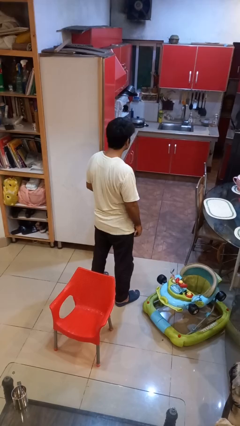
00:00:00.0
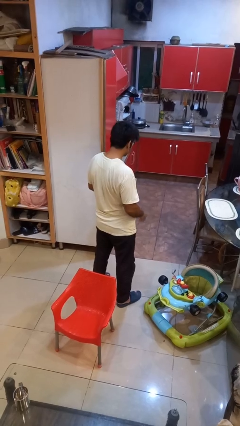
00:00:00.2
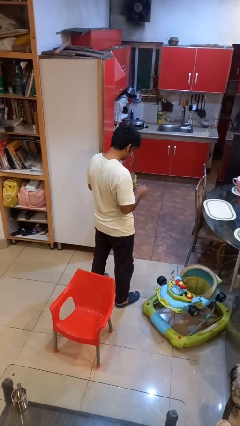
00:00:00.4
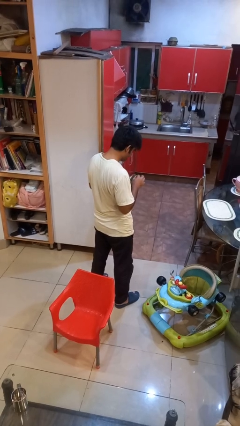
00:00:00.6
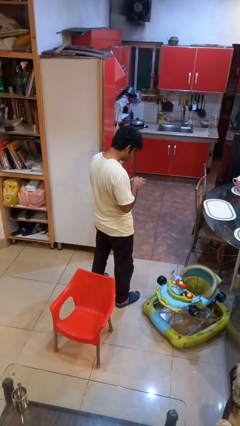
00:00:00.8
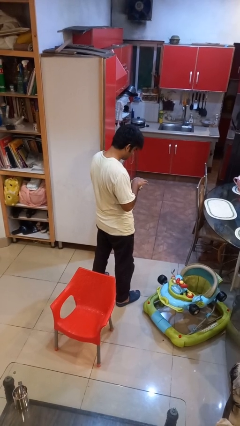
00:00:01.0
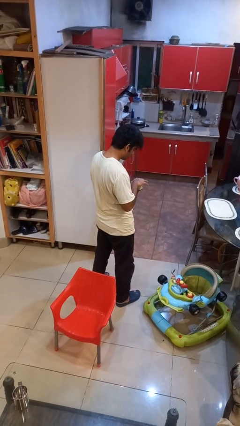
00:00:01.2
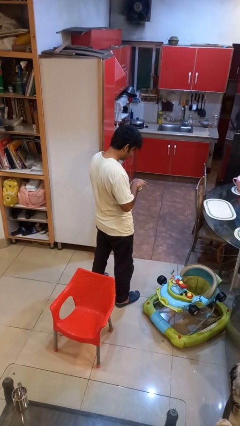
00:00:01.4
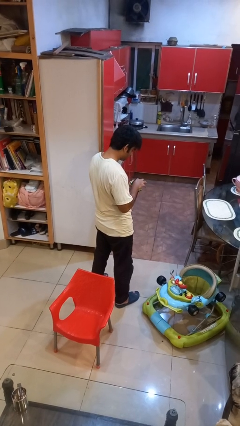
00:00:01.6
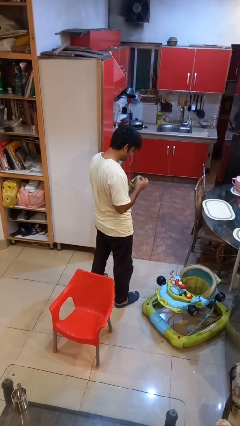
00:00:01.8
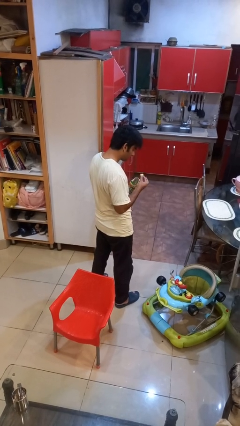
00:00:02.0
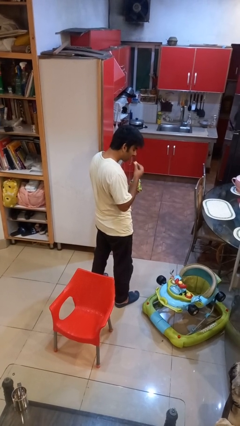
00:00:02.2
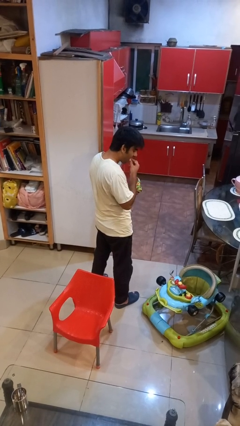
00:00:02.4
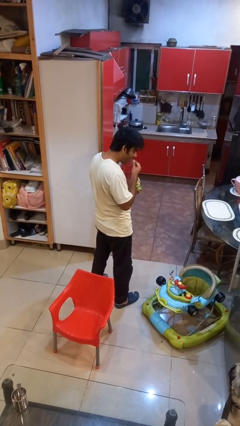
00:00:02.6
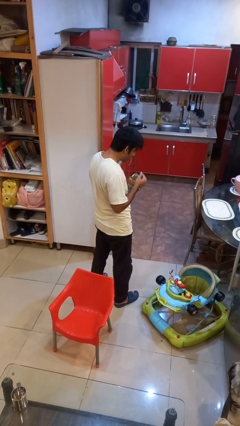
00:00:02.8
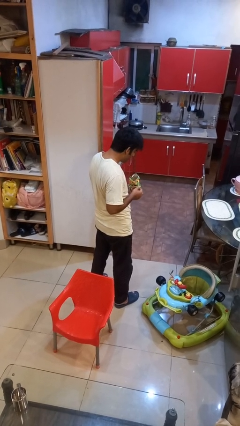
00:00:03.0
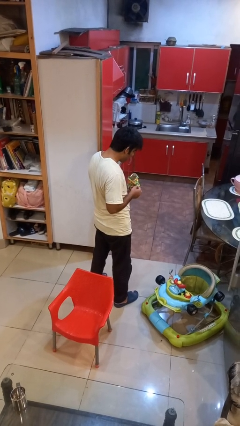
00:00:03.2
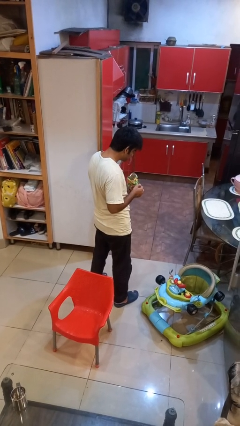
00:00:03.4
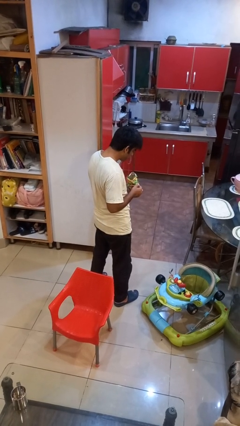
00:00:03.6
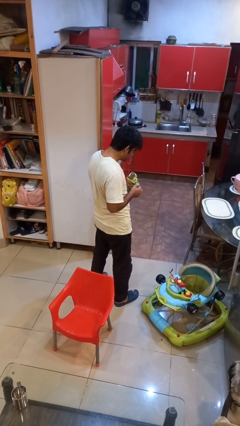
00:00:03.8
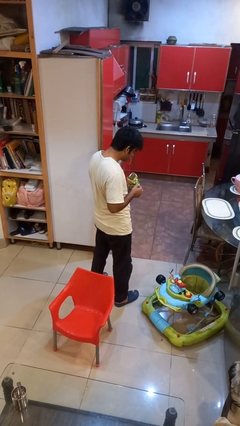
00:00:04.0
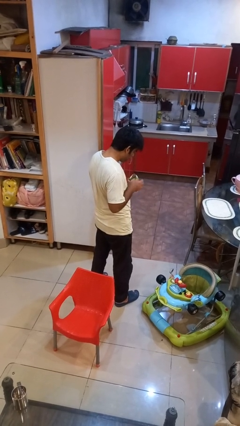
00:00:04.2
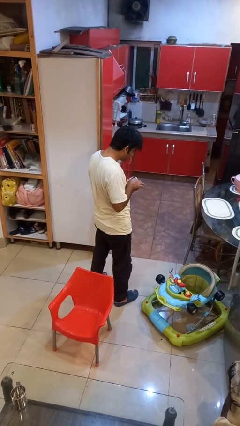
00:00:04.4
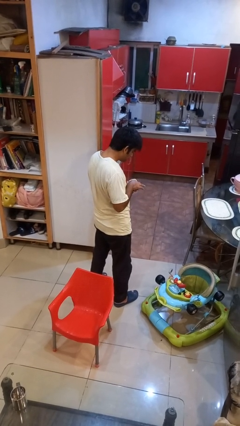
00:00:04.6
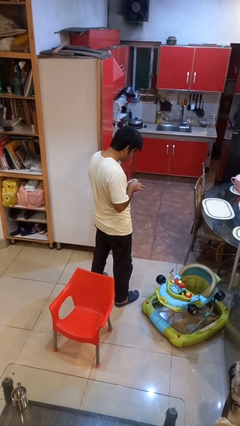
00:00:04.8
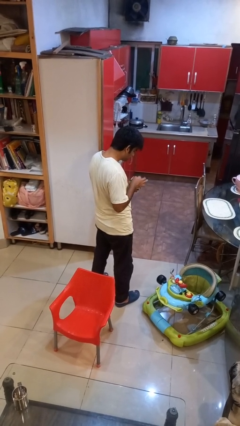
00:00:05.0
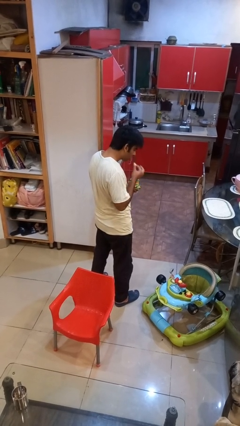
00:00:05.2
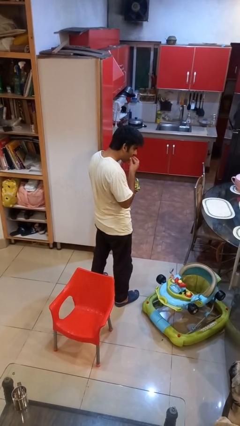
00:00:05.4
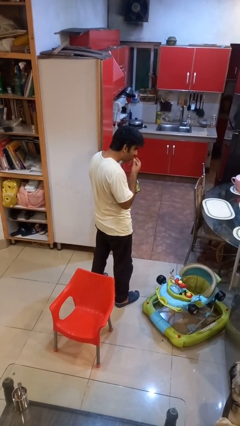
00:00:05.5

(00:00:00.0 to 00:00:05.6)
person eats snack from bag

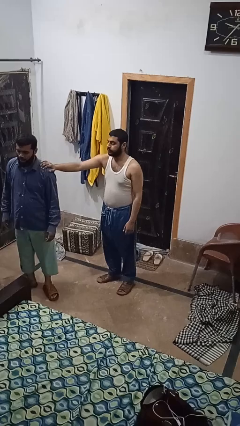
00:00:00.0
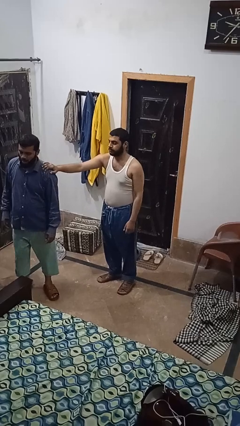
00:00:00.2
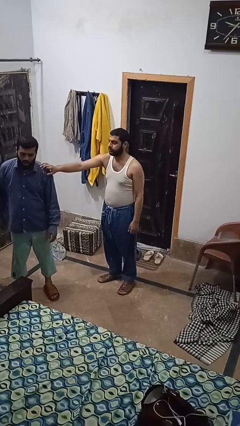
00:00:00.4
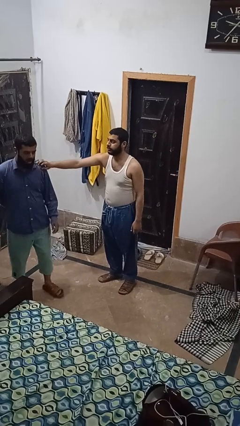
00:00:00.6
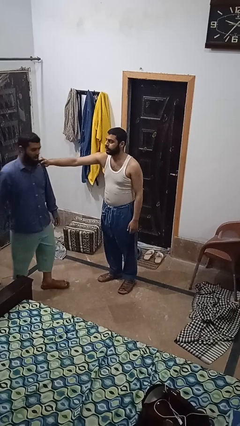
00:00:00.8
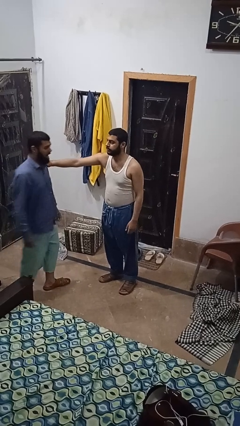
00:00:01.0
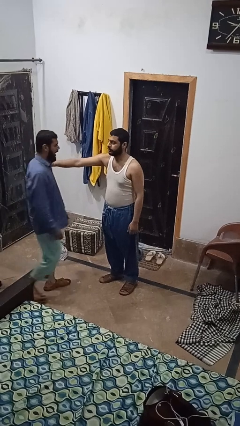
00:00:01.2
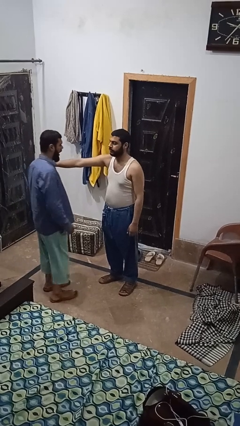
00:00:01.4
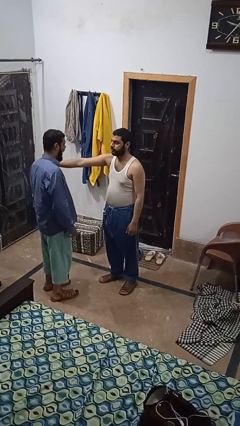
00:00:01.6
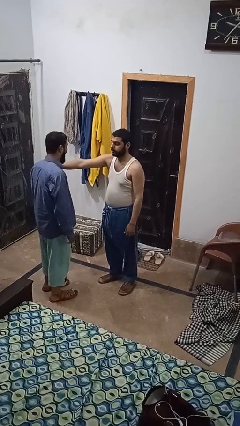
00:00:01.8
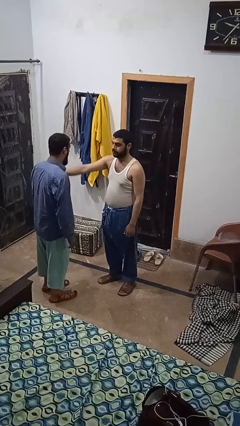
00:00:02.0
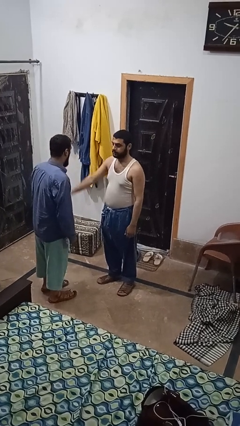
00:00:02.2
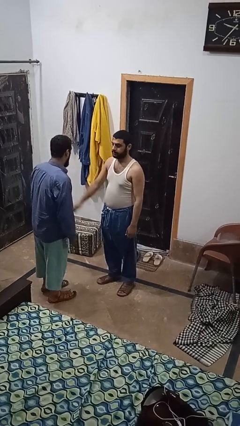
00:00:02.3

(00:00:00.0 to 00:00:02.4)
person spins person around

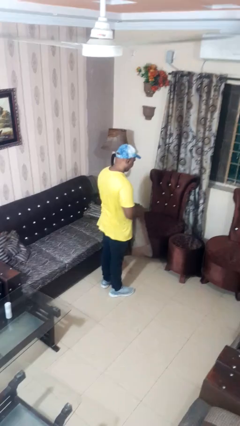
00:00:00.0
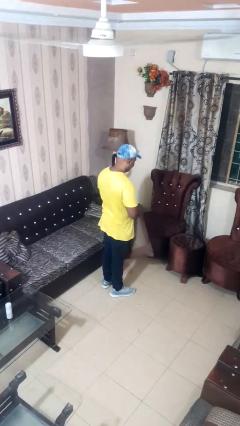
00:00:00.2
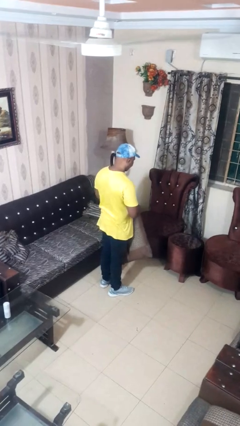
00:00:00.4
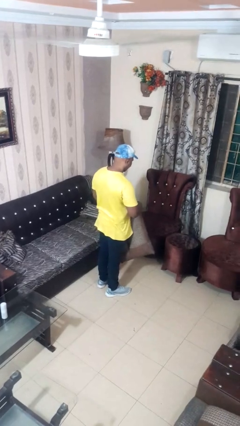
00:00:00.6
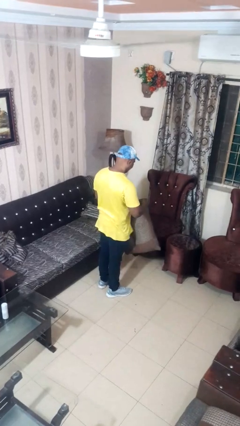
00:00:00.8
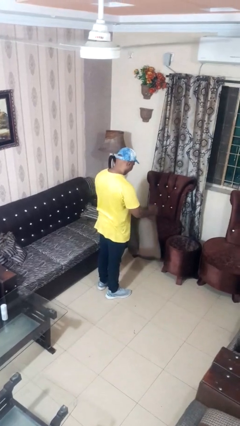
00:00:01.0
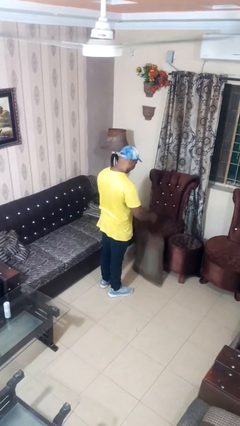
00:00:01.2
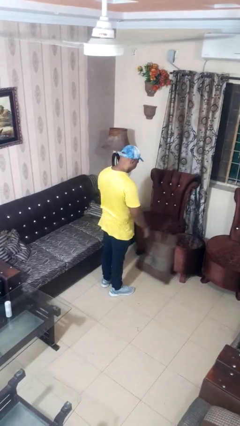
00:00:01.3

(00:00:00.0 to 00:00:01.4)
person throws object to ground

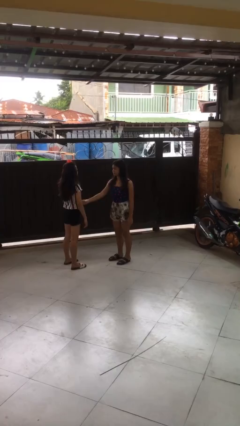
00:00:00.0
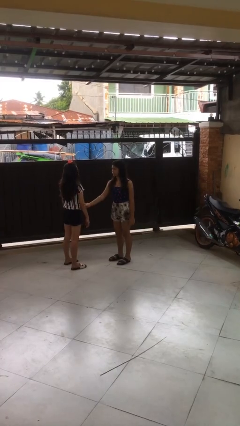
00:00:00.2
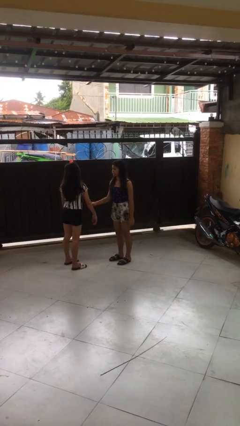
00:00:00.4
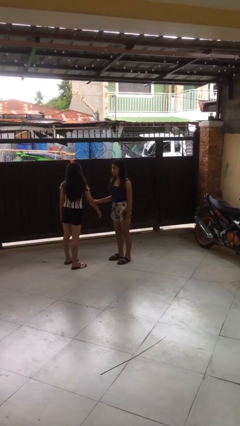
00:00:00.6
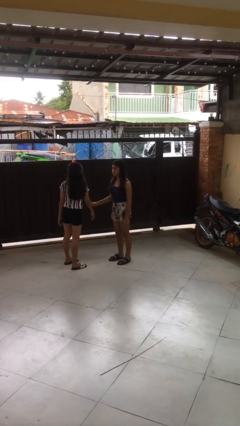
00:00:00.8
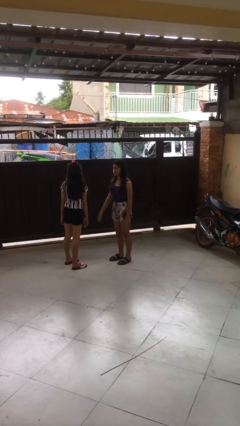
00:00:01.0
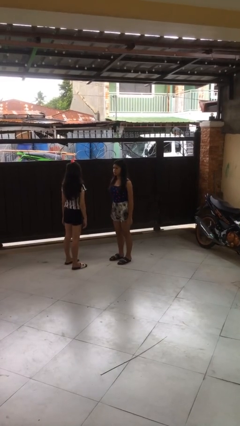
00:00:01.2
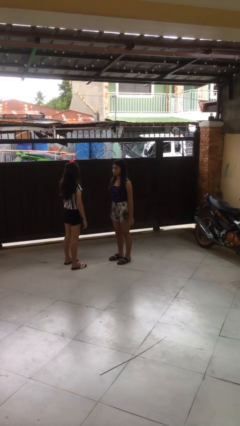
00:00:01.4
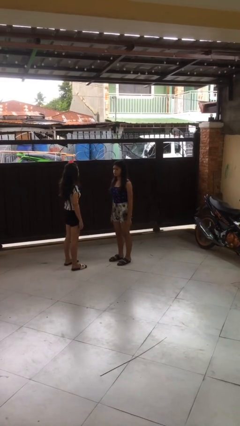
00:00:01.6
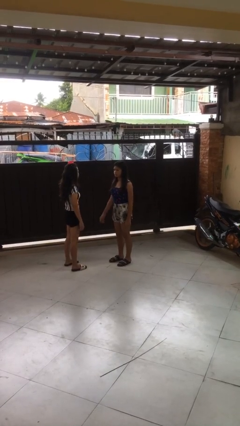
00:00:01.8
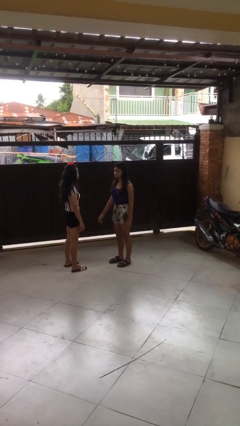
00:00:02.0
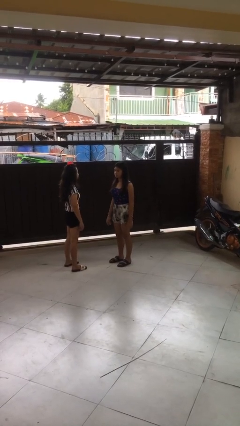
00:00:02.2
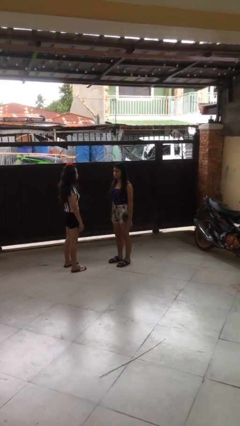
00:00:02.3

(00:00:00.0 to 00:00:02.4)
person grabs person by forearm

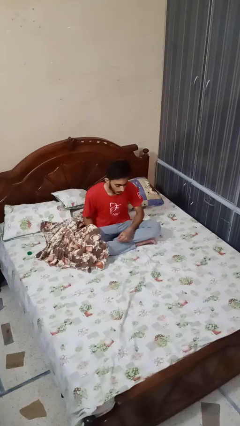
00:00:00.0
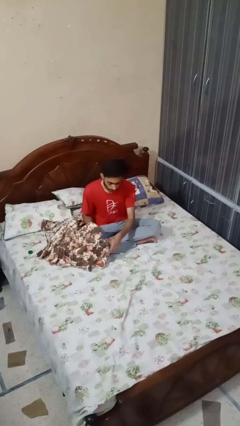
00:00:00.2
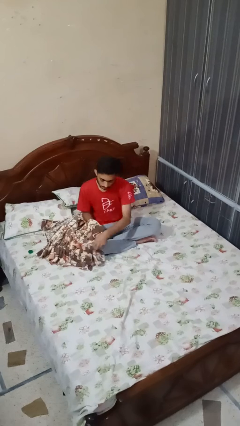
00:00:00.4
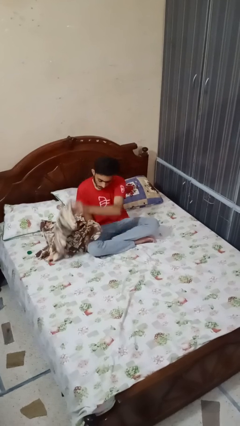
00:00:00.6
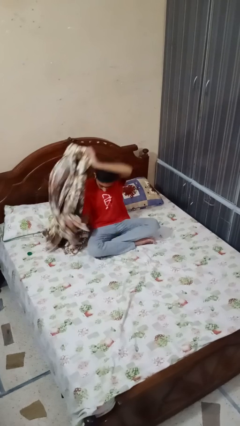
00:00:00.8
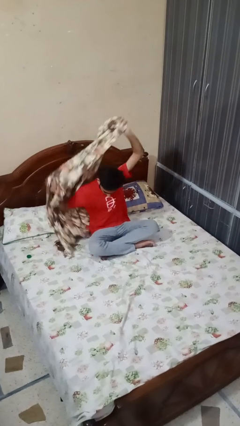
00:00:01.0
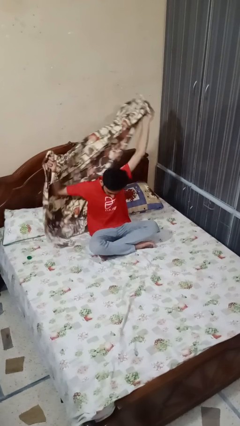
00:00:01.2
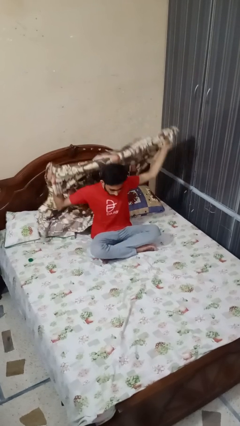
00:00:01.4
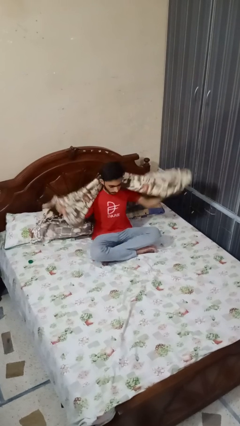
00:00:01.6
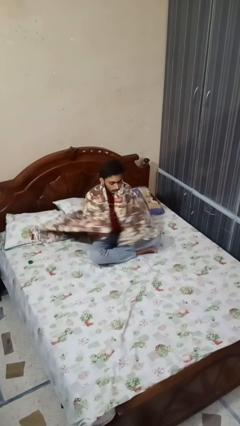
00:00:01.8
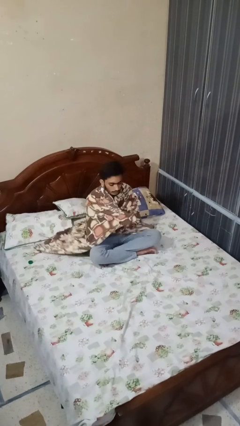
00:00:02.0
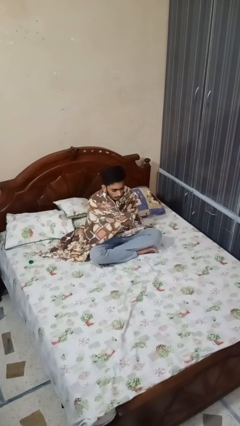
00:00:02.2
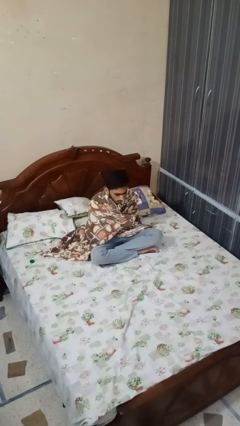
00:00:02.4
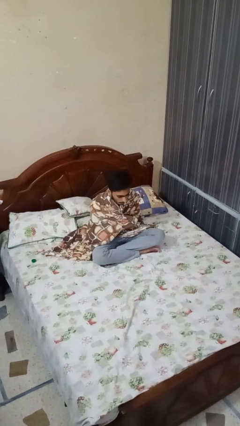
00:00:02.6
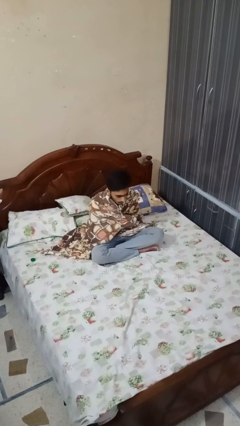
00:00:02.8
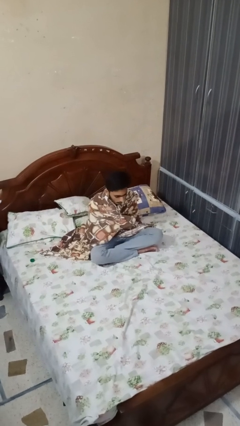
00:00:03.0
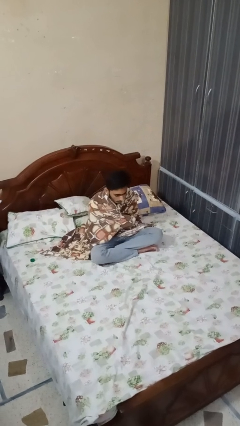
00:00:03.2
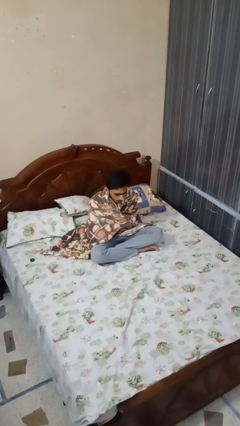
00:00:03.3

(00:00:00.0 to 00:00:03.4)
person covers with blanket

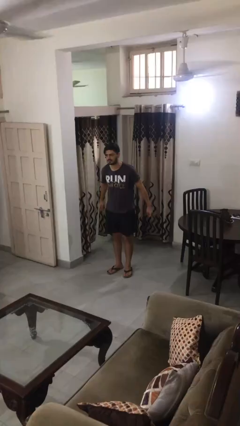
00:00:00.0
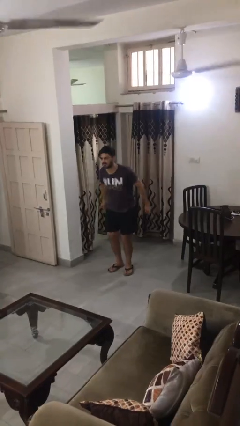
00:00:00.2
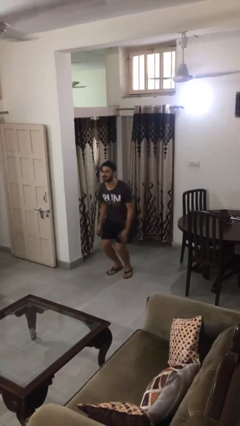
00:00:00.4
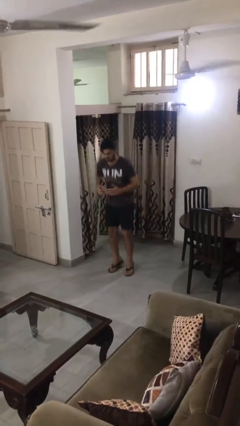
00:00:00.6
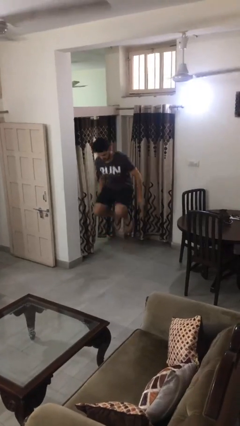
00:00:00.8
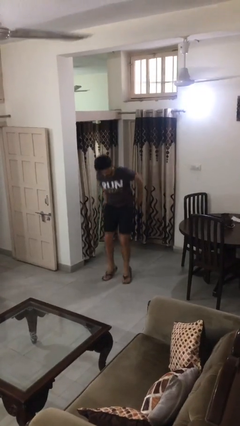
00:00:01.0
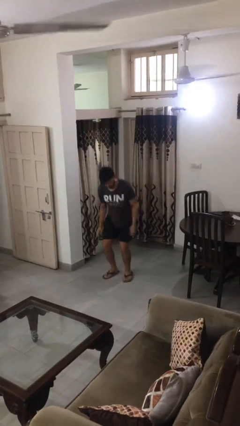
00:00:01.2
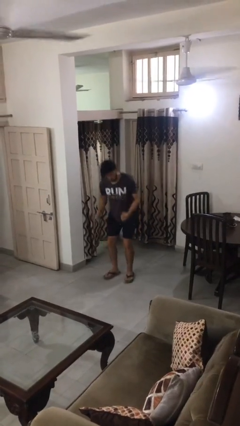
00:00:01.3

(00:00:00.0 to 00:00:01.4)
person jumps

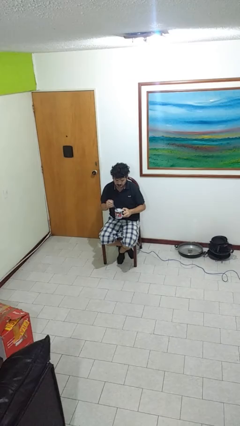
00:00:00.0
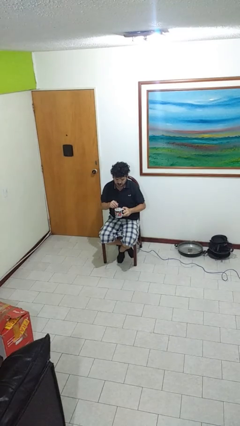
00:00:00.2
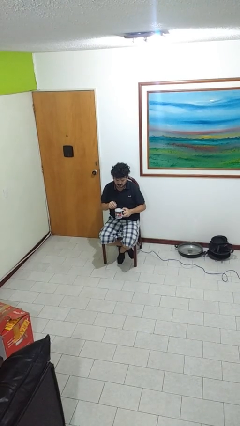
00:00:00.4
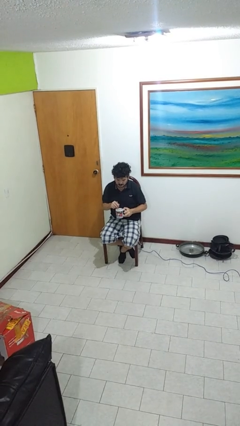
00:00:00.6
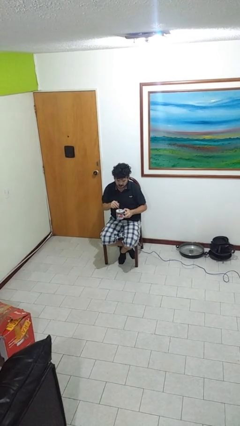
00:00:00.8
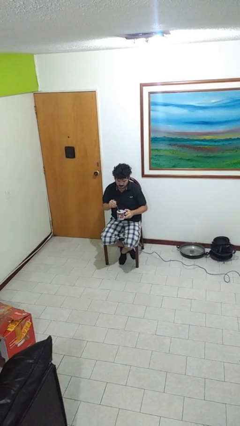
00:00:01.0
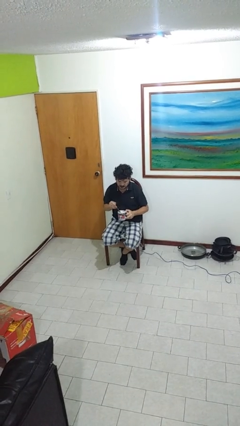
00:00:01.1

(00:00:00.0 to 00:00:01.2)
person stirs mug
